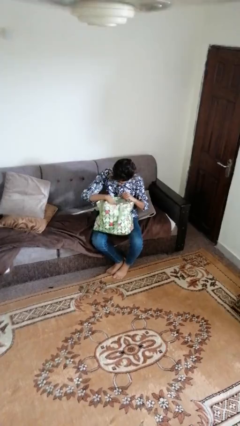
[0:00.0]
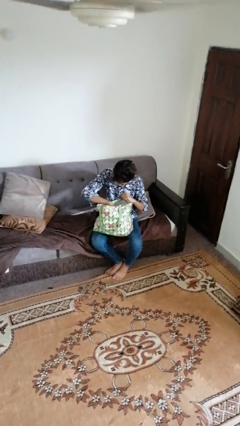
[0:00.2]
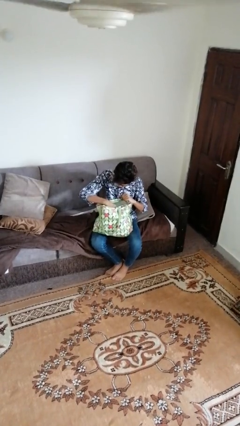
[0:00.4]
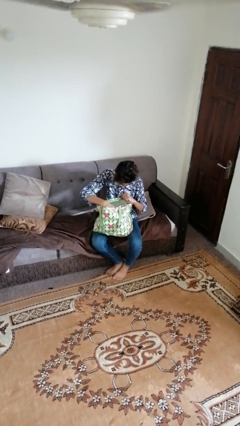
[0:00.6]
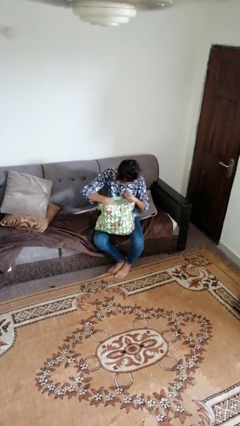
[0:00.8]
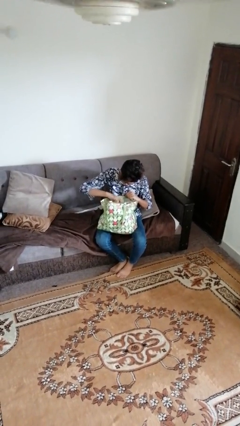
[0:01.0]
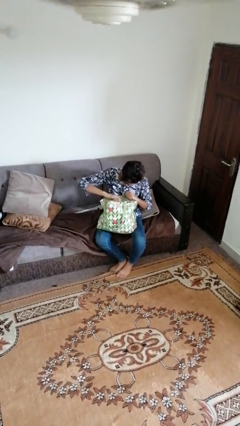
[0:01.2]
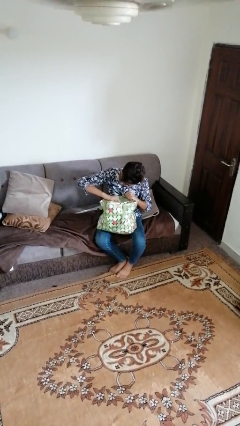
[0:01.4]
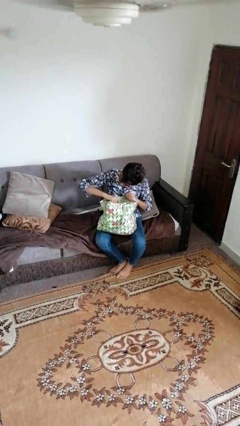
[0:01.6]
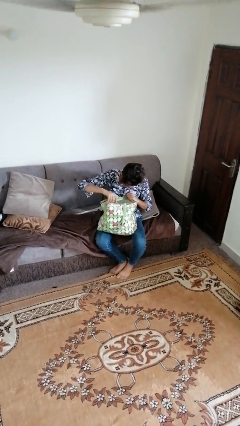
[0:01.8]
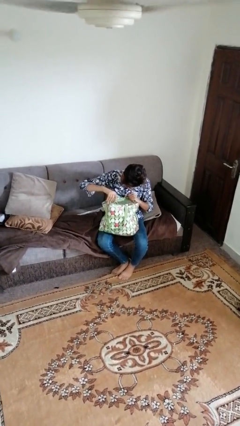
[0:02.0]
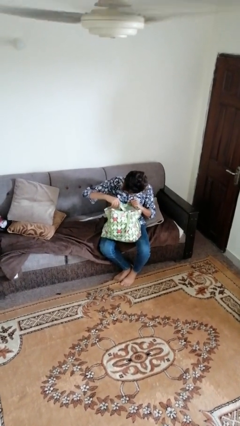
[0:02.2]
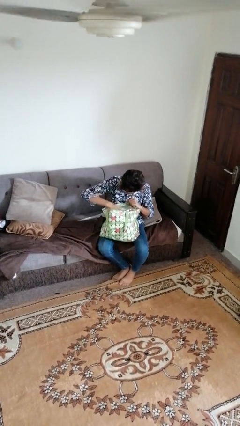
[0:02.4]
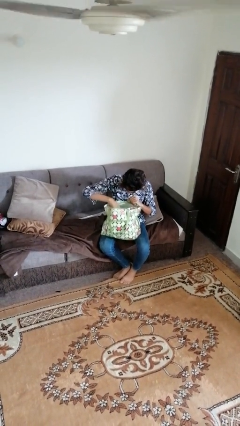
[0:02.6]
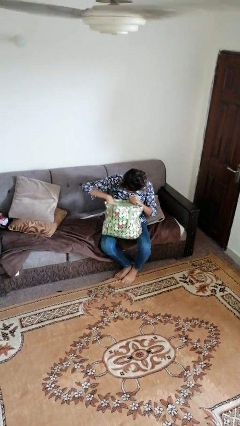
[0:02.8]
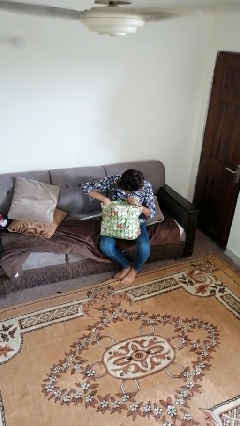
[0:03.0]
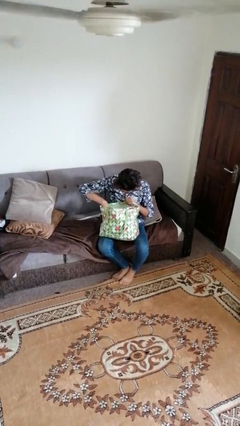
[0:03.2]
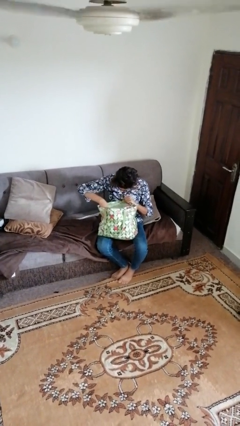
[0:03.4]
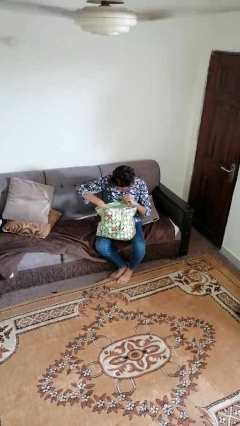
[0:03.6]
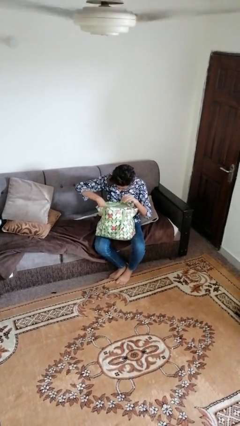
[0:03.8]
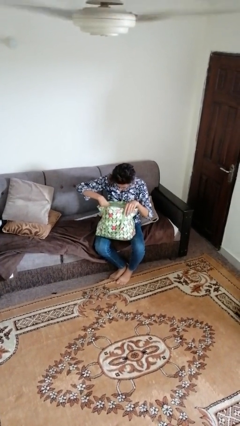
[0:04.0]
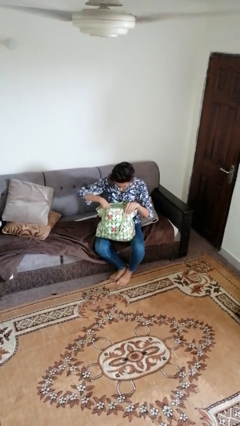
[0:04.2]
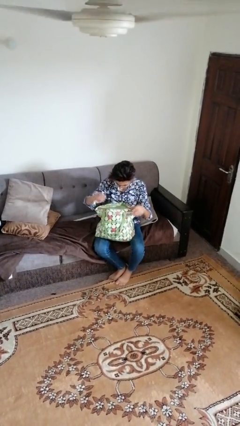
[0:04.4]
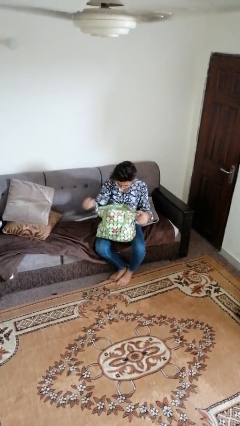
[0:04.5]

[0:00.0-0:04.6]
person searches in bag

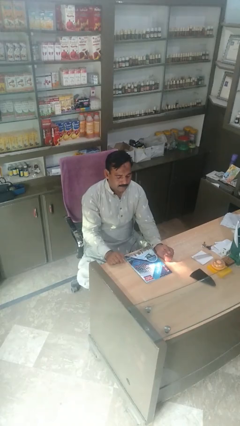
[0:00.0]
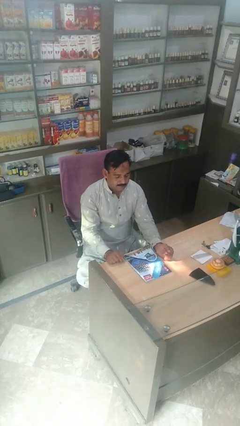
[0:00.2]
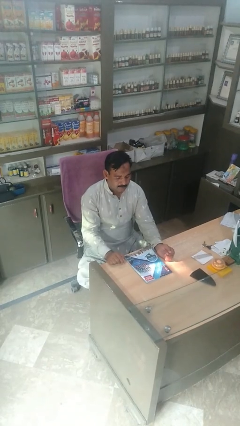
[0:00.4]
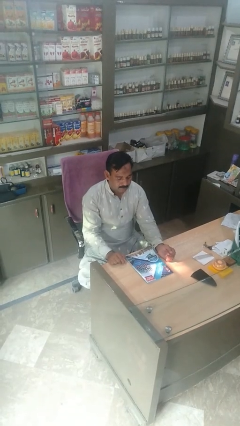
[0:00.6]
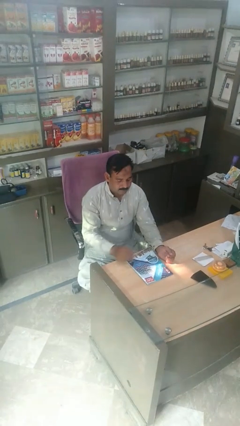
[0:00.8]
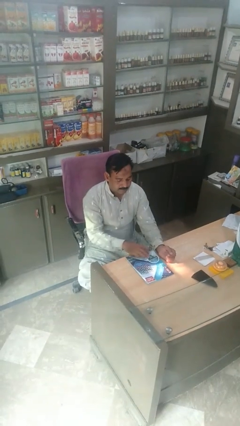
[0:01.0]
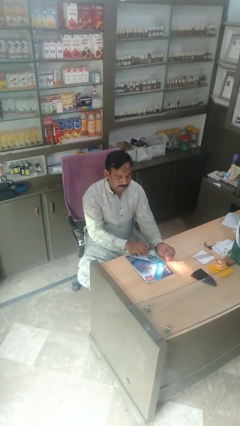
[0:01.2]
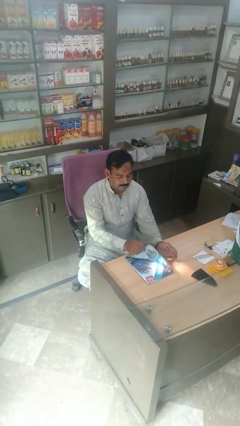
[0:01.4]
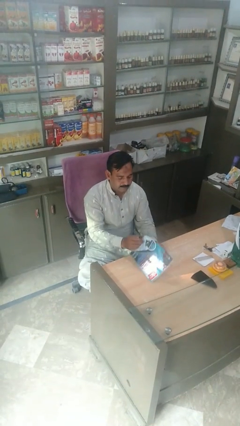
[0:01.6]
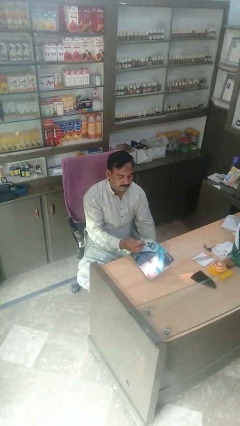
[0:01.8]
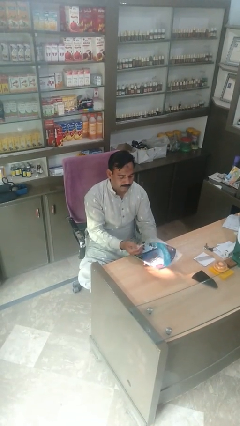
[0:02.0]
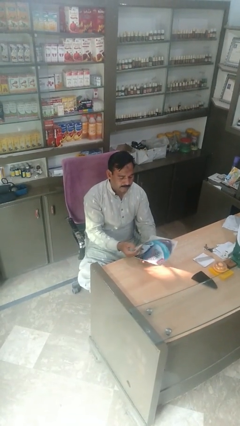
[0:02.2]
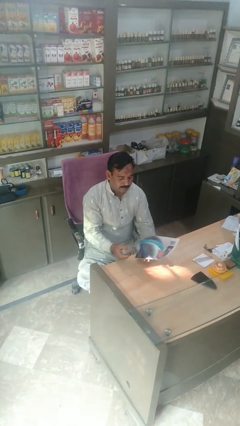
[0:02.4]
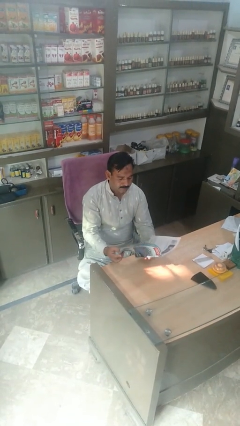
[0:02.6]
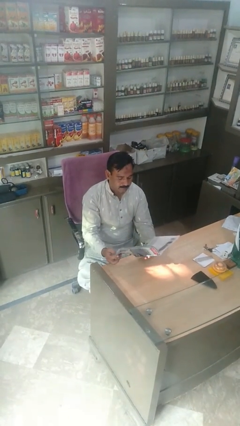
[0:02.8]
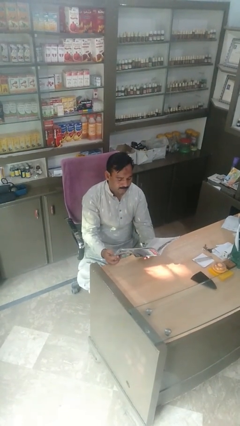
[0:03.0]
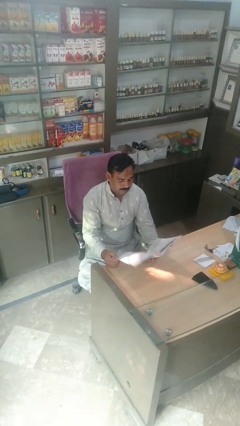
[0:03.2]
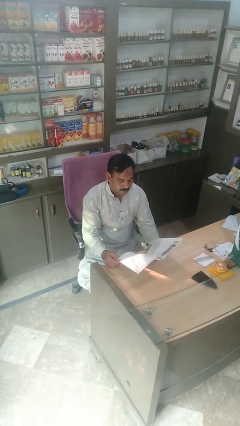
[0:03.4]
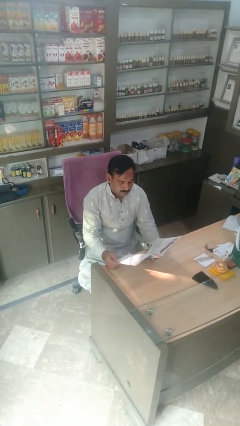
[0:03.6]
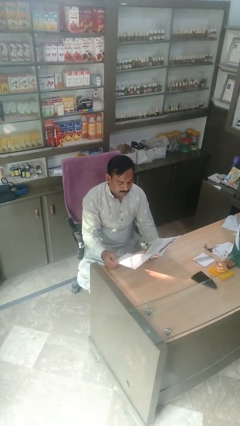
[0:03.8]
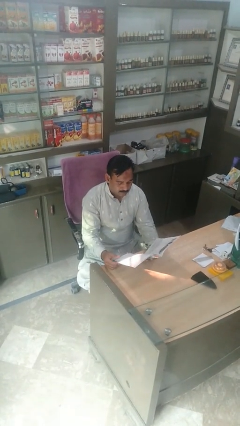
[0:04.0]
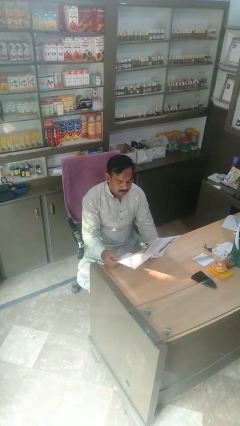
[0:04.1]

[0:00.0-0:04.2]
person reads magazine

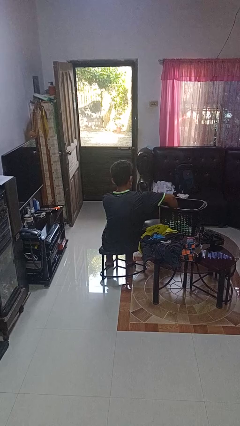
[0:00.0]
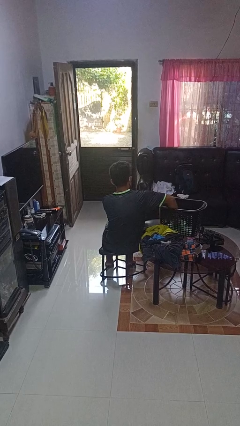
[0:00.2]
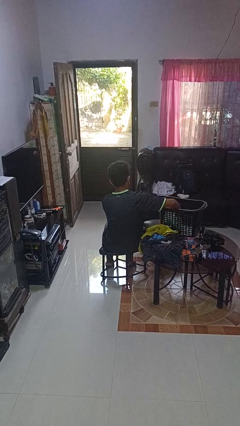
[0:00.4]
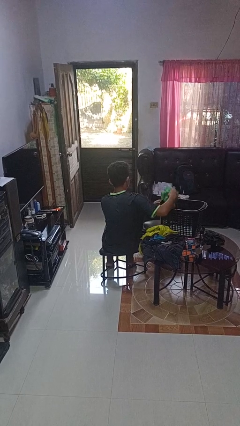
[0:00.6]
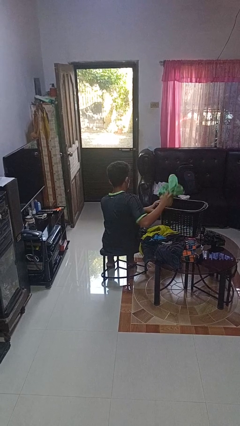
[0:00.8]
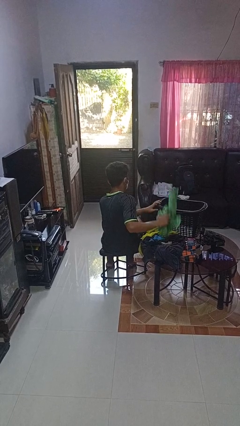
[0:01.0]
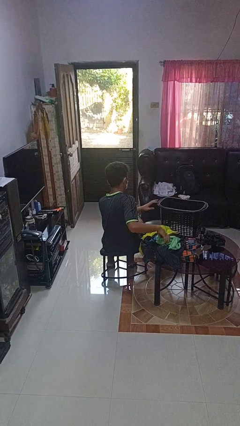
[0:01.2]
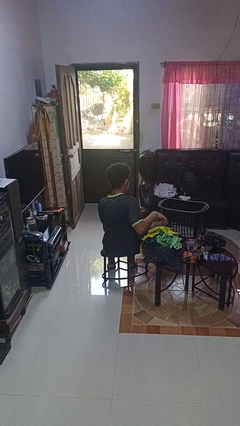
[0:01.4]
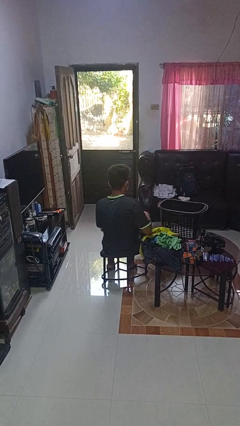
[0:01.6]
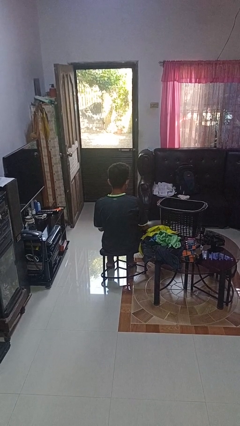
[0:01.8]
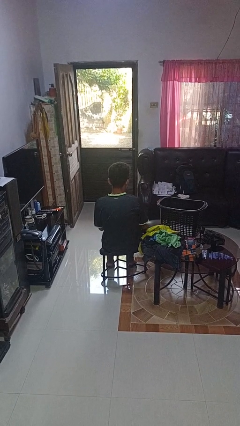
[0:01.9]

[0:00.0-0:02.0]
person takes object from basket

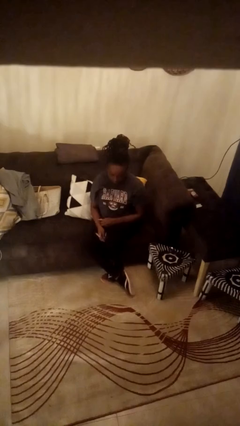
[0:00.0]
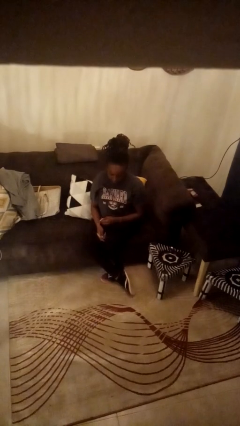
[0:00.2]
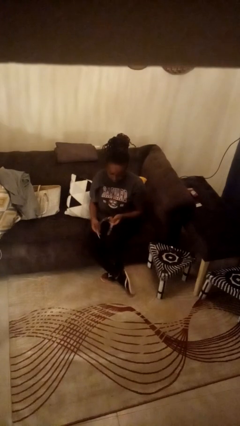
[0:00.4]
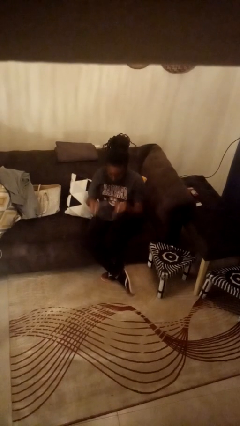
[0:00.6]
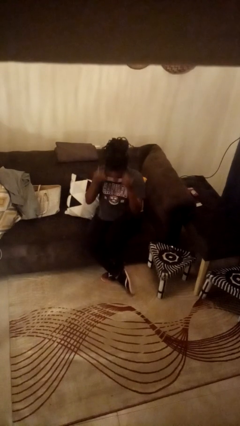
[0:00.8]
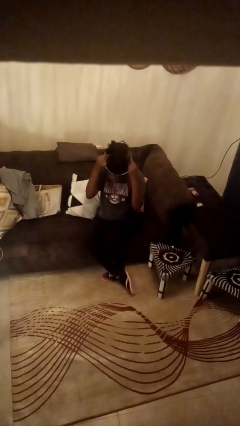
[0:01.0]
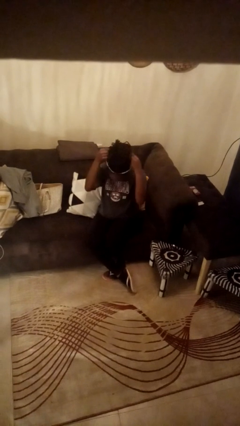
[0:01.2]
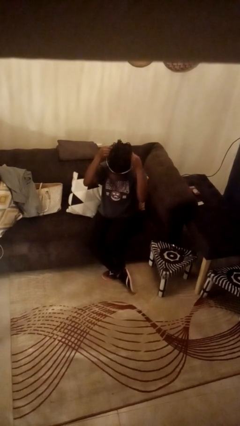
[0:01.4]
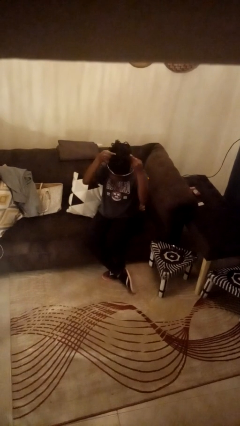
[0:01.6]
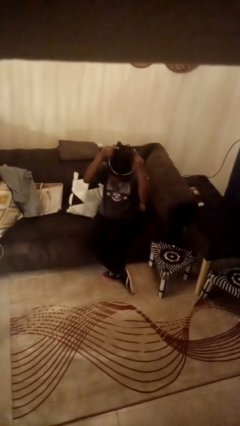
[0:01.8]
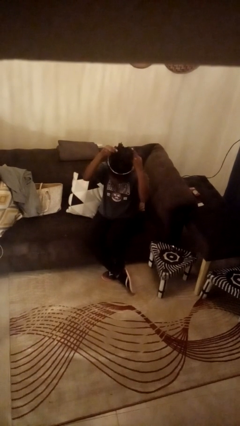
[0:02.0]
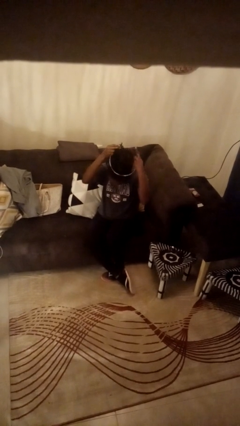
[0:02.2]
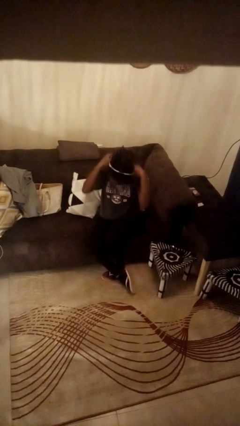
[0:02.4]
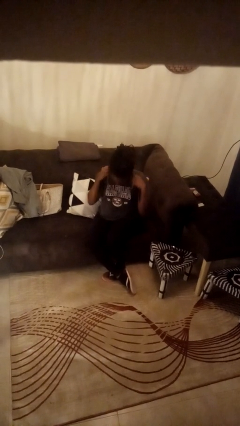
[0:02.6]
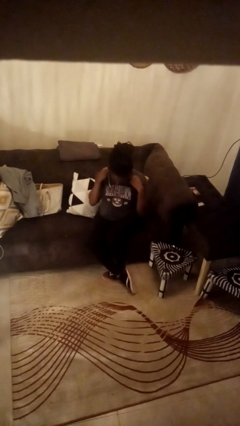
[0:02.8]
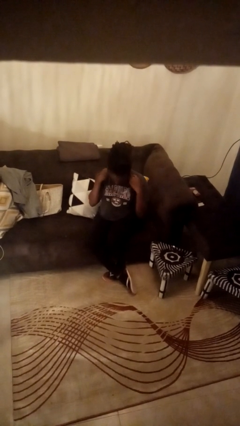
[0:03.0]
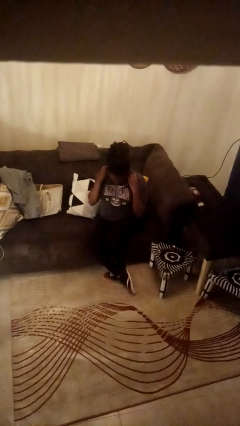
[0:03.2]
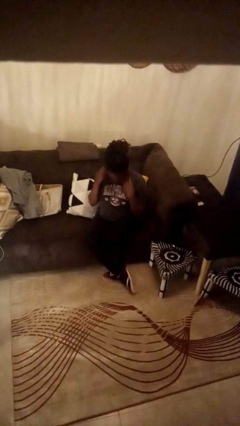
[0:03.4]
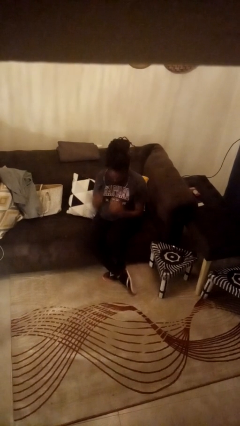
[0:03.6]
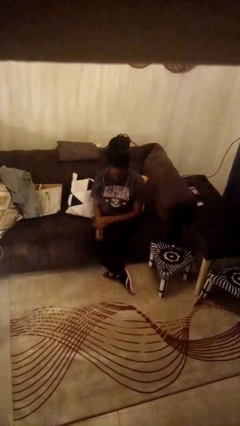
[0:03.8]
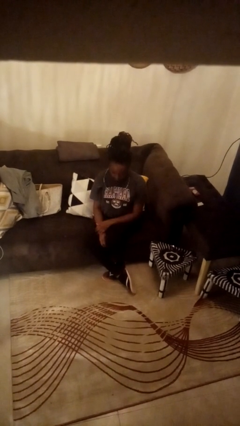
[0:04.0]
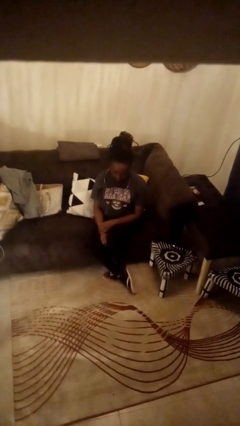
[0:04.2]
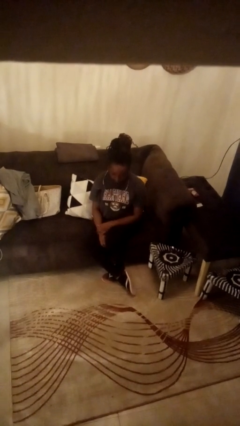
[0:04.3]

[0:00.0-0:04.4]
person puts on necklace

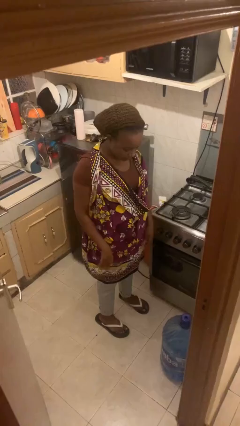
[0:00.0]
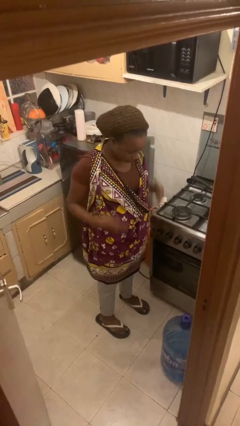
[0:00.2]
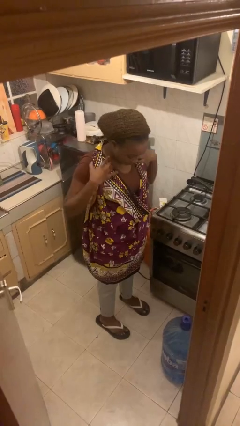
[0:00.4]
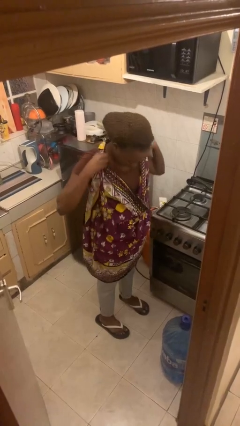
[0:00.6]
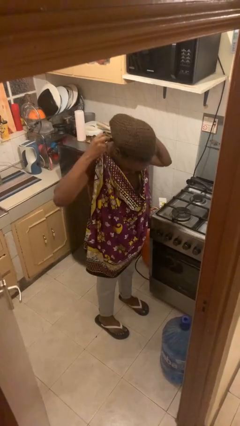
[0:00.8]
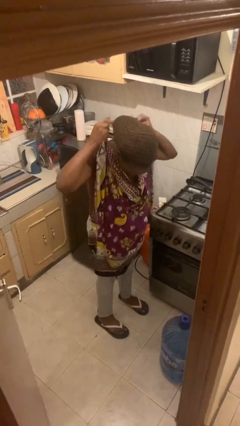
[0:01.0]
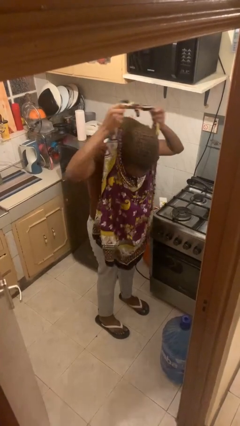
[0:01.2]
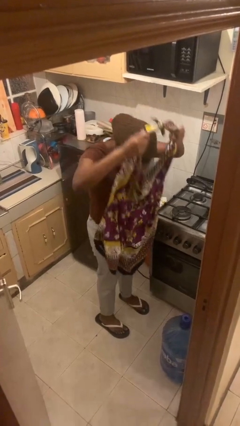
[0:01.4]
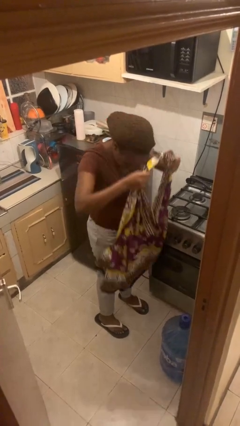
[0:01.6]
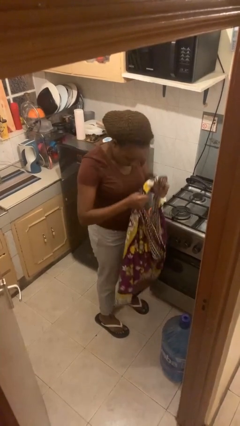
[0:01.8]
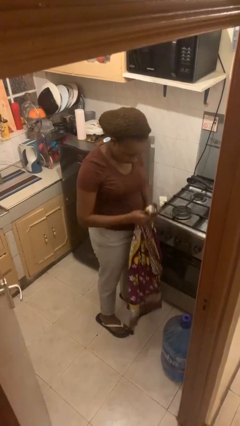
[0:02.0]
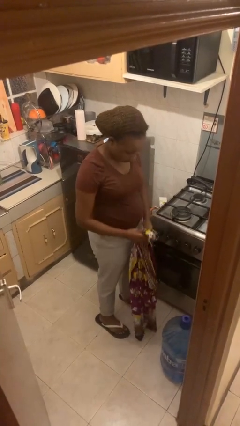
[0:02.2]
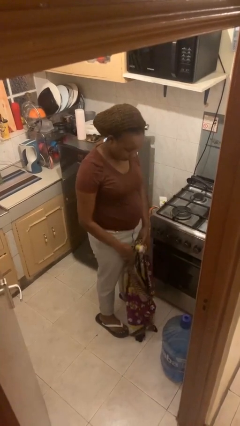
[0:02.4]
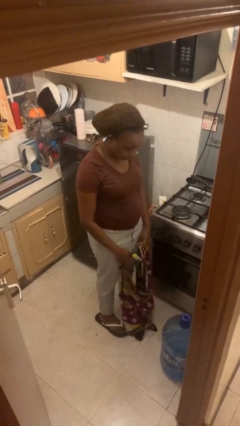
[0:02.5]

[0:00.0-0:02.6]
person takes off apron
